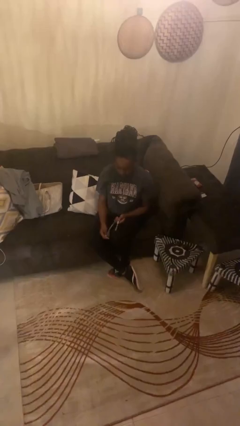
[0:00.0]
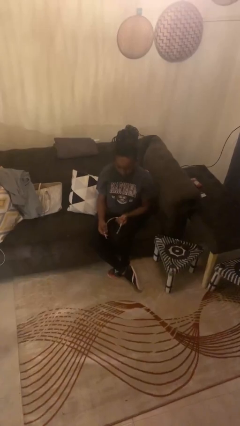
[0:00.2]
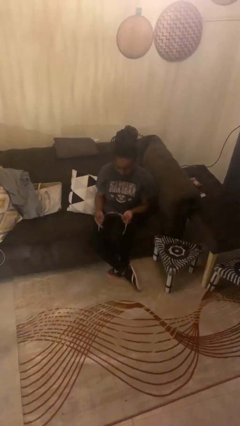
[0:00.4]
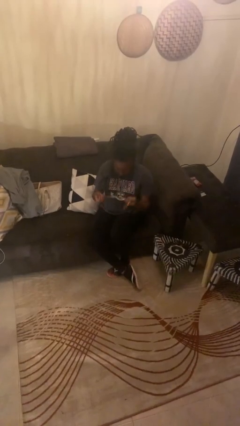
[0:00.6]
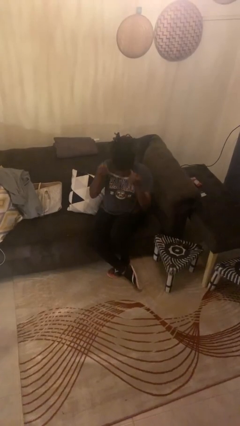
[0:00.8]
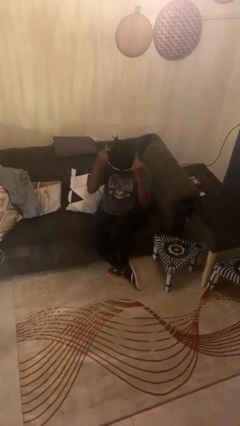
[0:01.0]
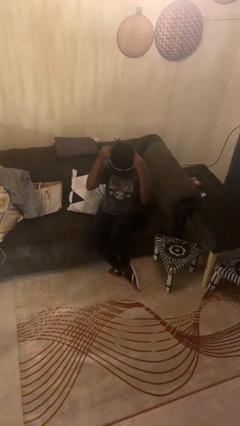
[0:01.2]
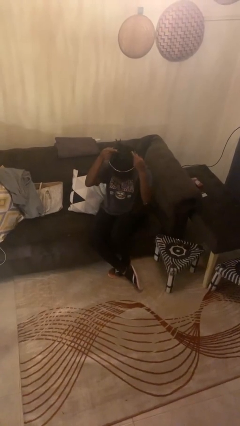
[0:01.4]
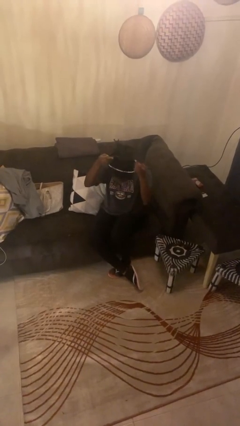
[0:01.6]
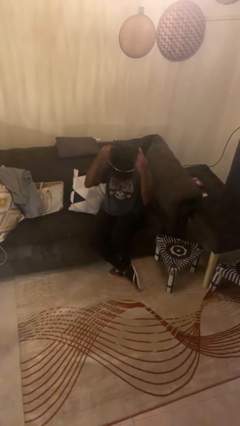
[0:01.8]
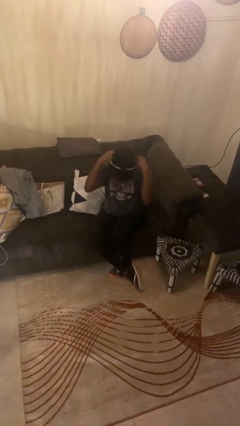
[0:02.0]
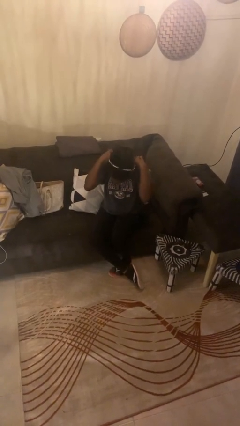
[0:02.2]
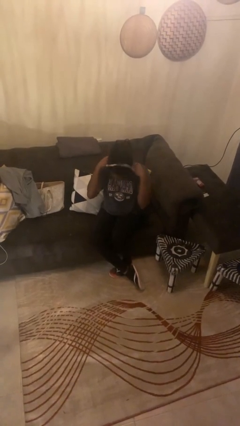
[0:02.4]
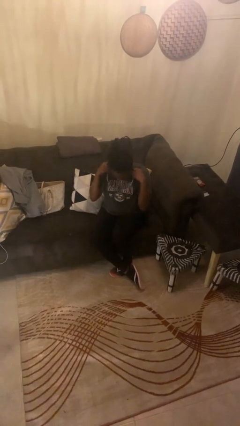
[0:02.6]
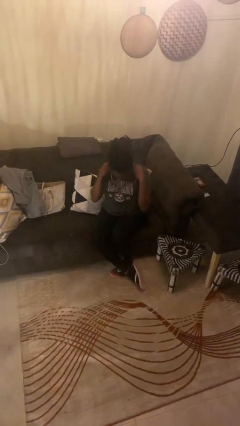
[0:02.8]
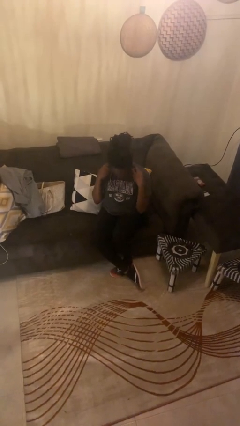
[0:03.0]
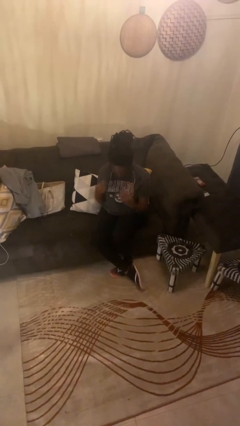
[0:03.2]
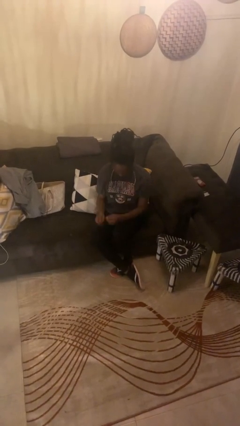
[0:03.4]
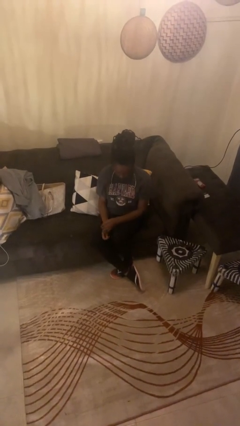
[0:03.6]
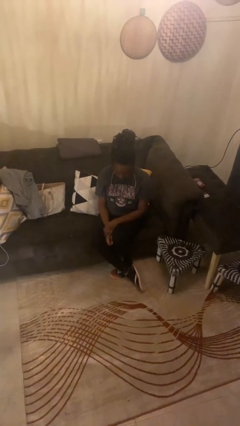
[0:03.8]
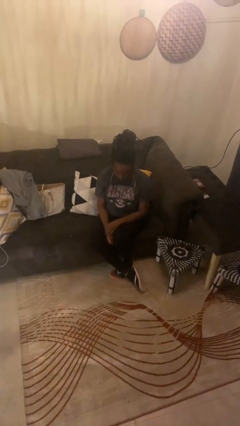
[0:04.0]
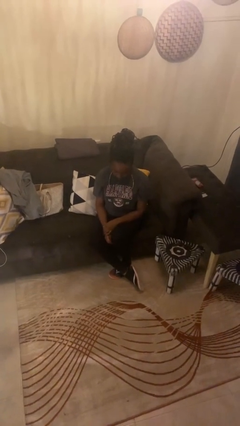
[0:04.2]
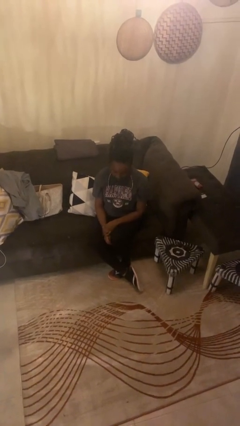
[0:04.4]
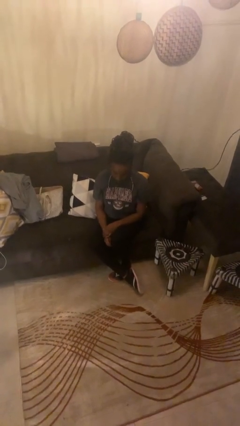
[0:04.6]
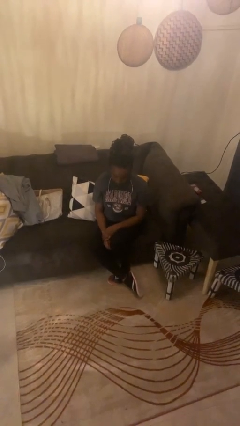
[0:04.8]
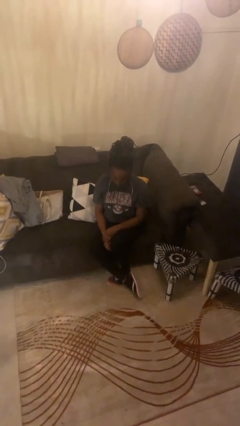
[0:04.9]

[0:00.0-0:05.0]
person puts on necklace

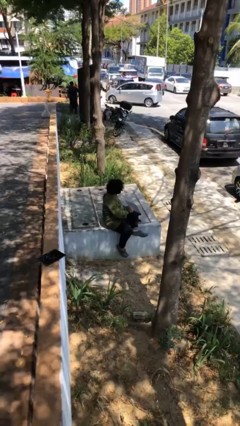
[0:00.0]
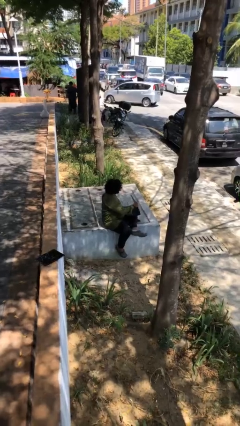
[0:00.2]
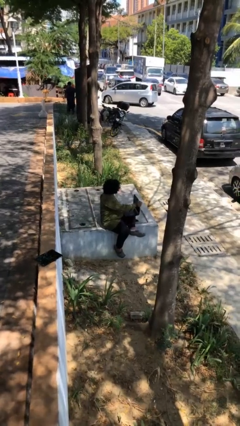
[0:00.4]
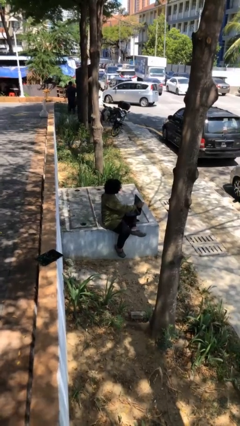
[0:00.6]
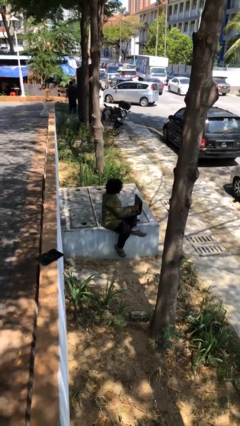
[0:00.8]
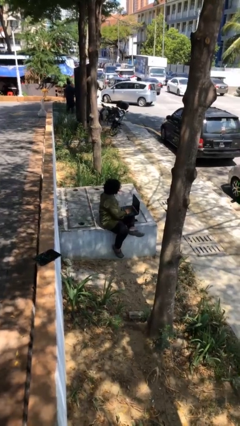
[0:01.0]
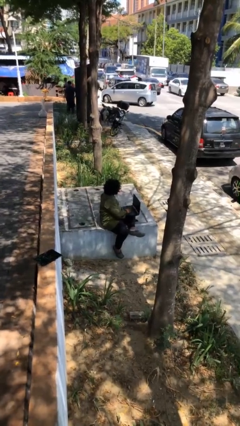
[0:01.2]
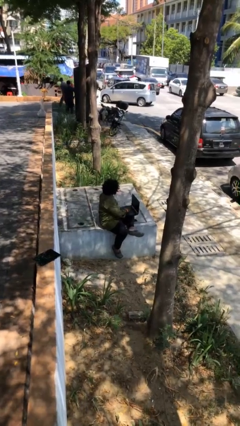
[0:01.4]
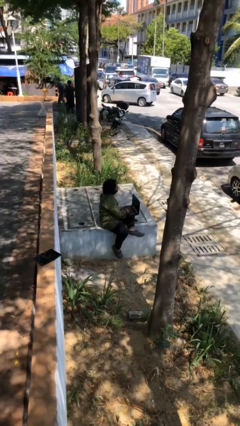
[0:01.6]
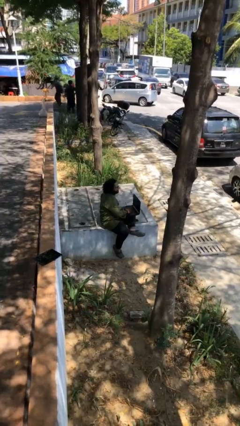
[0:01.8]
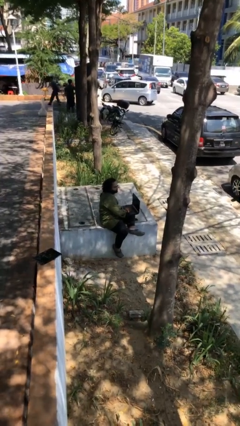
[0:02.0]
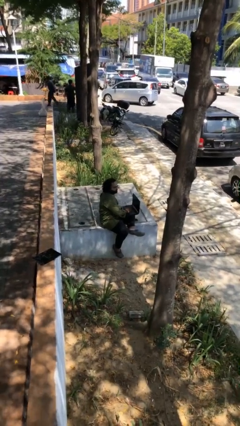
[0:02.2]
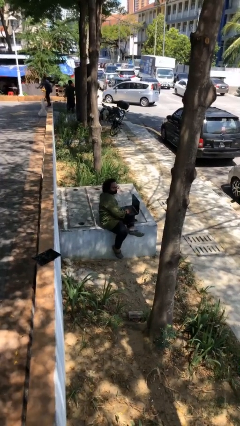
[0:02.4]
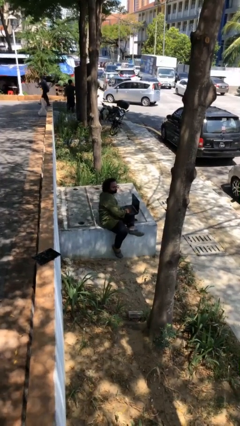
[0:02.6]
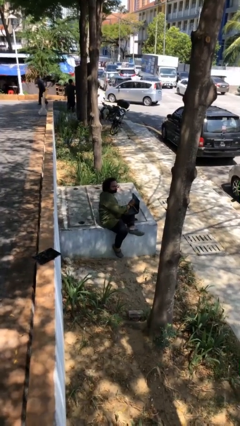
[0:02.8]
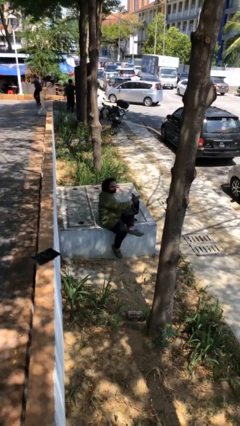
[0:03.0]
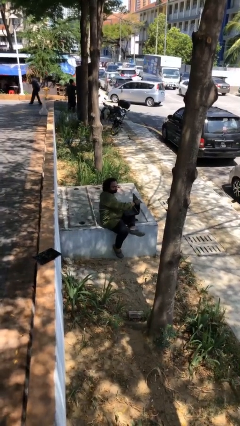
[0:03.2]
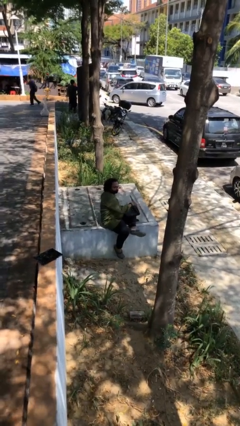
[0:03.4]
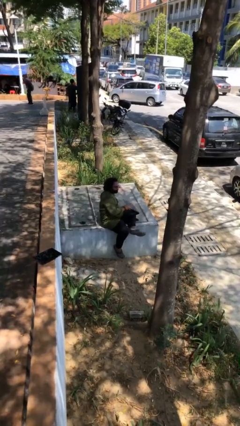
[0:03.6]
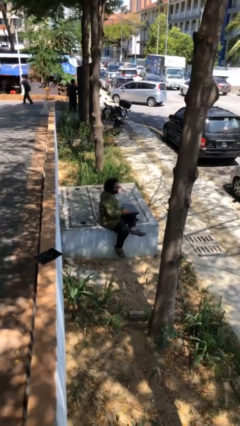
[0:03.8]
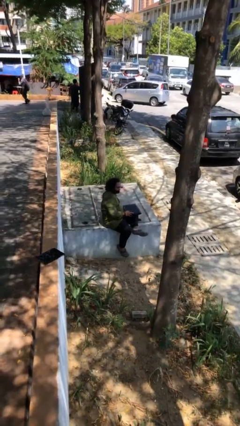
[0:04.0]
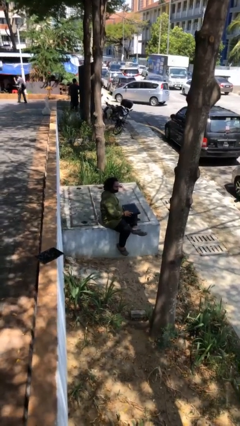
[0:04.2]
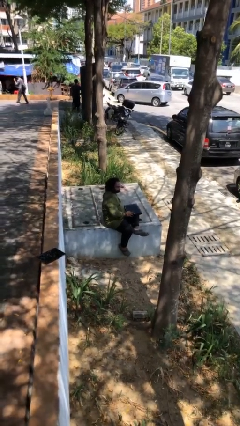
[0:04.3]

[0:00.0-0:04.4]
person interacts with laptop

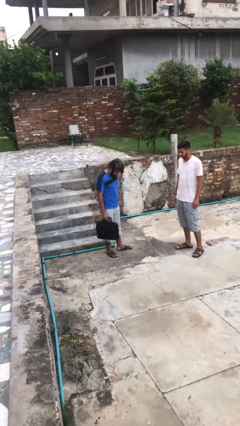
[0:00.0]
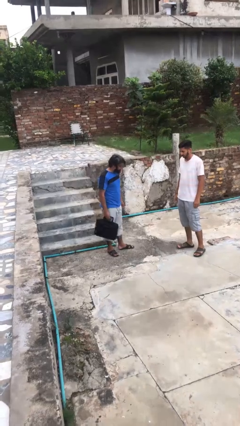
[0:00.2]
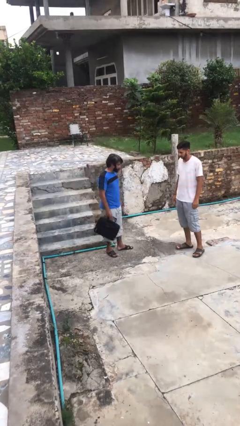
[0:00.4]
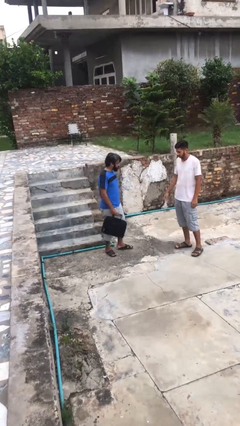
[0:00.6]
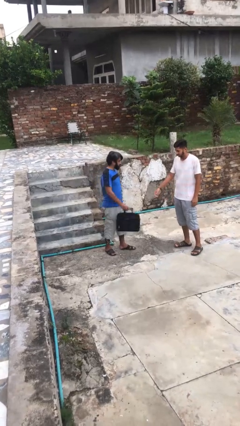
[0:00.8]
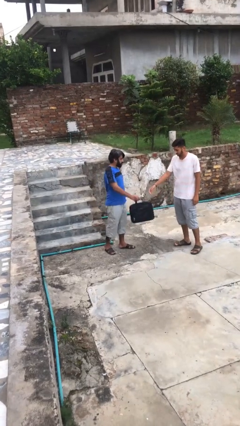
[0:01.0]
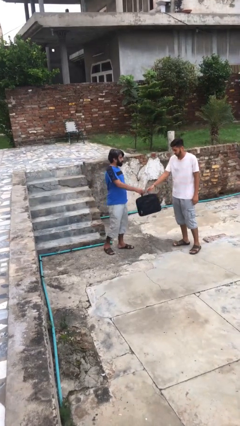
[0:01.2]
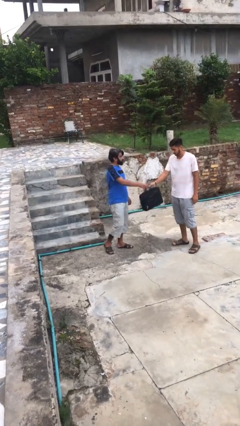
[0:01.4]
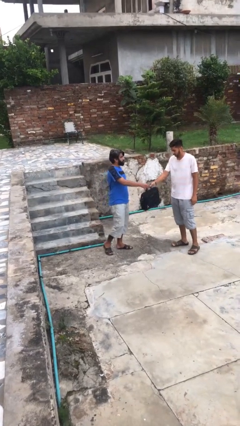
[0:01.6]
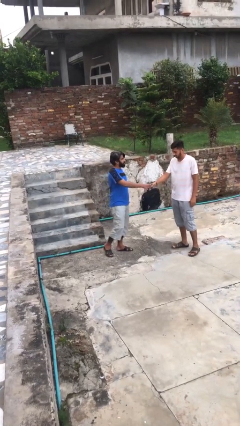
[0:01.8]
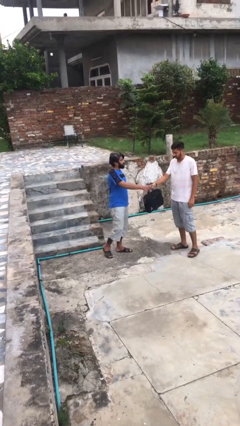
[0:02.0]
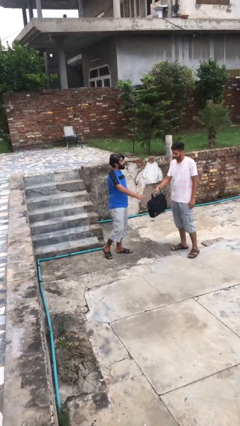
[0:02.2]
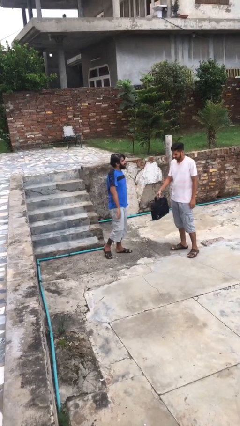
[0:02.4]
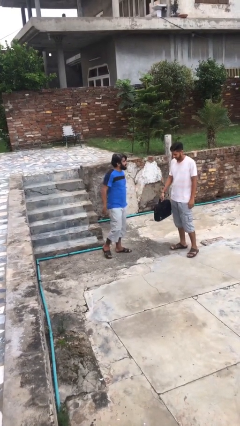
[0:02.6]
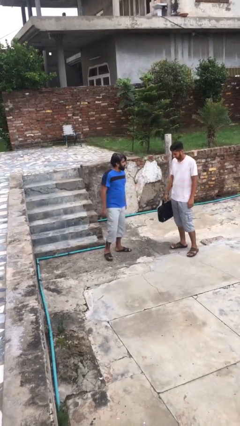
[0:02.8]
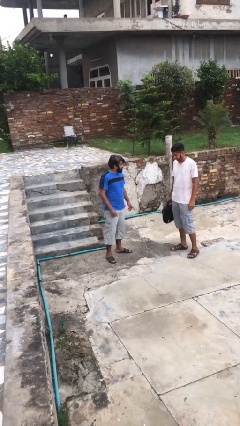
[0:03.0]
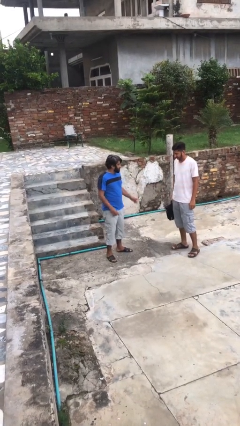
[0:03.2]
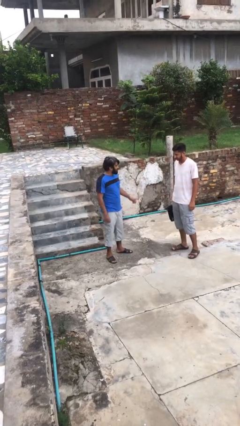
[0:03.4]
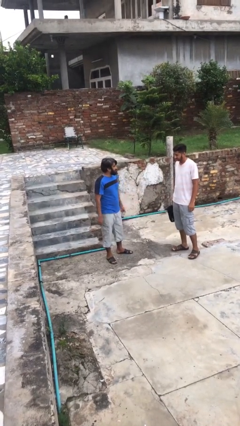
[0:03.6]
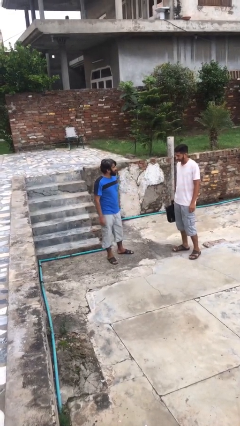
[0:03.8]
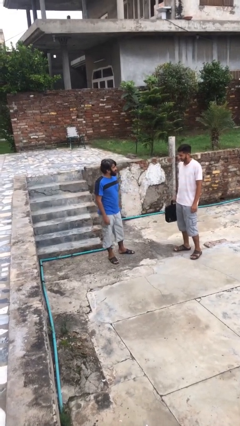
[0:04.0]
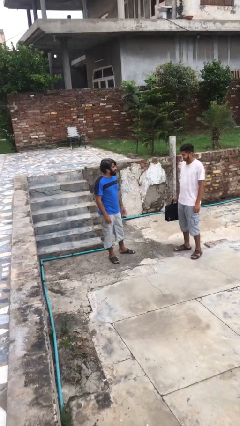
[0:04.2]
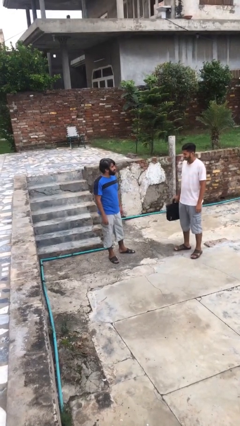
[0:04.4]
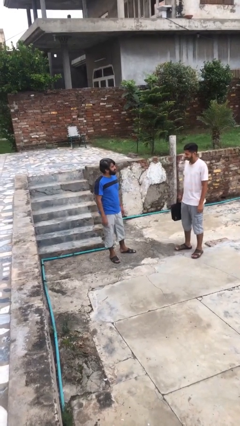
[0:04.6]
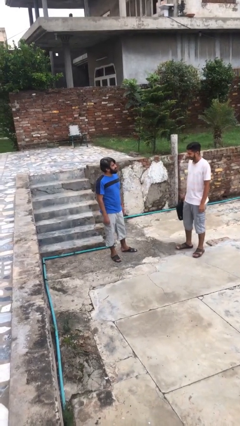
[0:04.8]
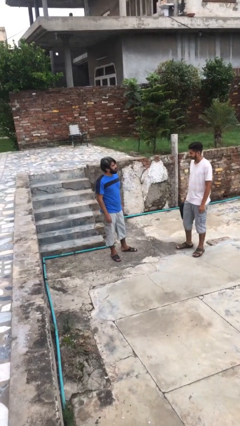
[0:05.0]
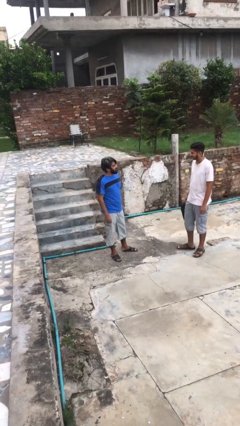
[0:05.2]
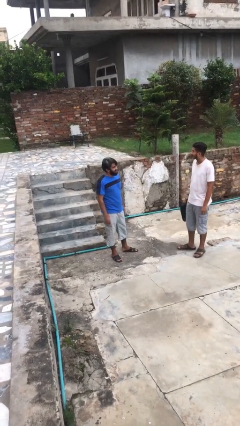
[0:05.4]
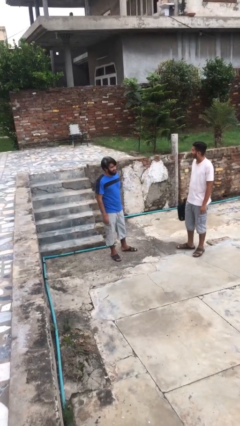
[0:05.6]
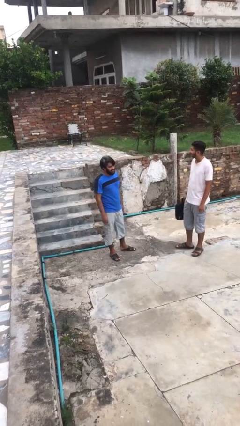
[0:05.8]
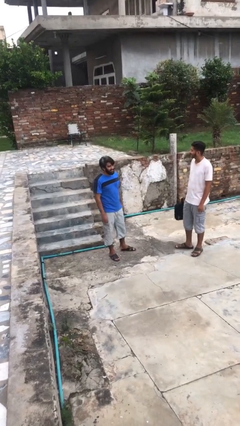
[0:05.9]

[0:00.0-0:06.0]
person transfers object to person

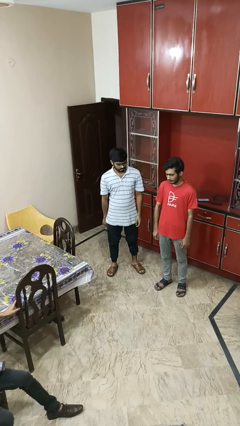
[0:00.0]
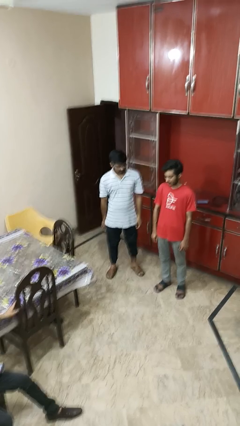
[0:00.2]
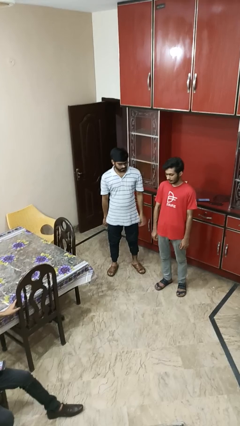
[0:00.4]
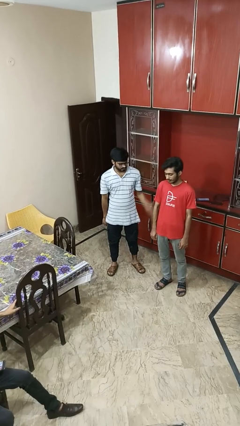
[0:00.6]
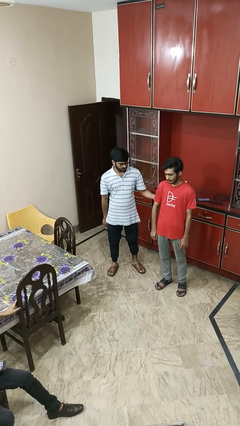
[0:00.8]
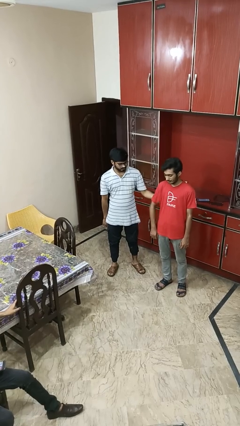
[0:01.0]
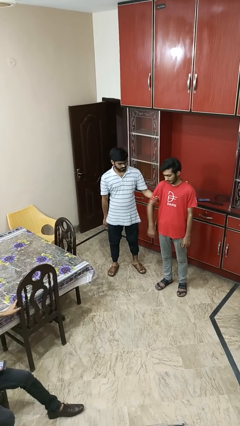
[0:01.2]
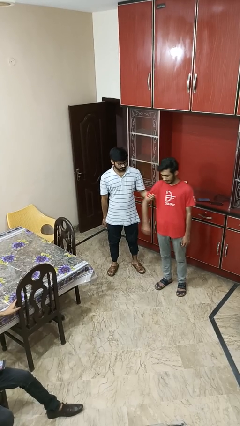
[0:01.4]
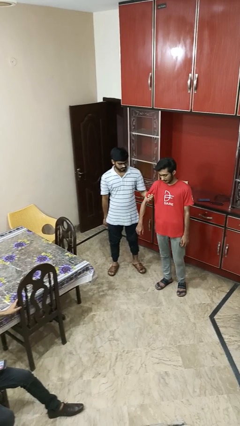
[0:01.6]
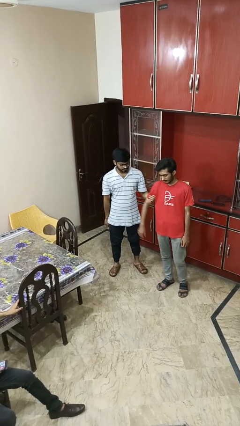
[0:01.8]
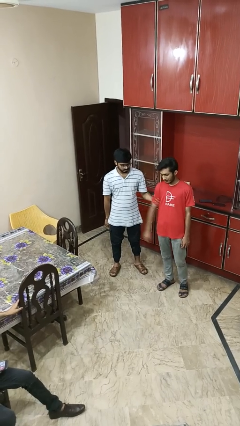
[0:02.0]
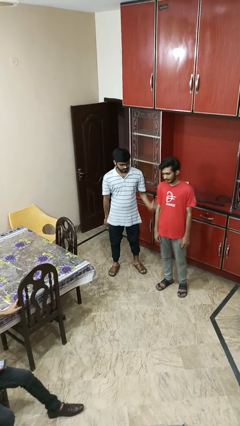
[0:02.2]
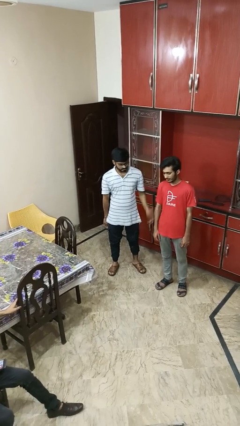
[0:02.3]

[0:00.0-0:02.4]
person grabs person by bicep
